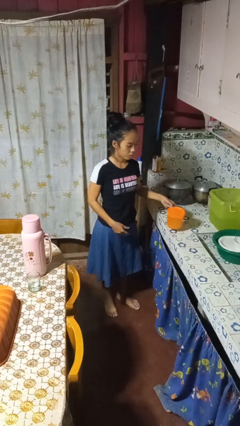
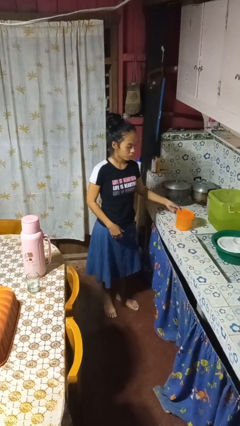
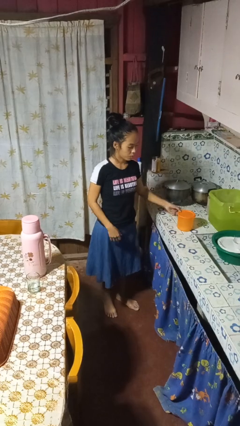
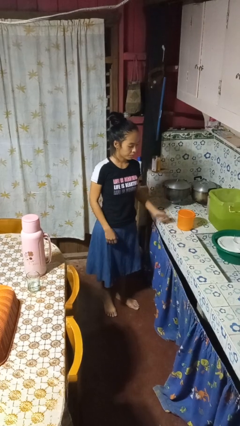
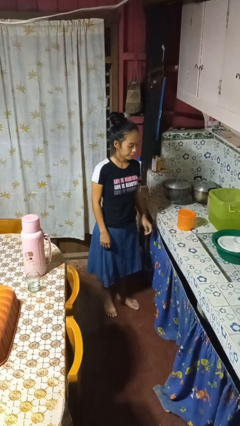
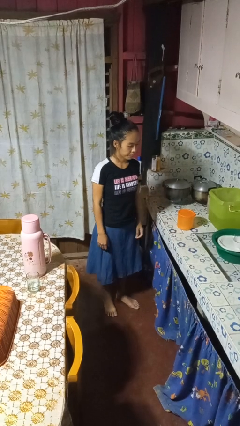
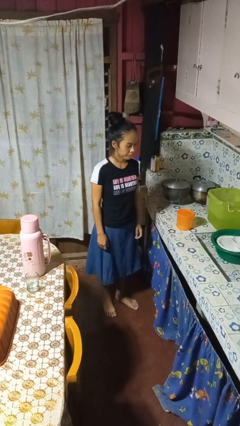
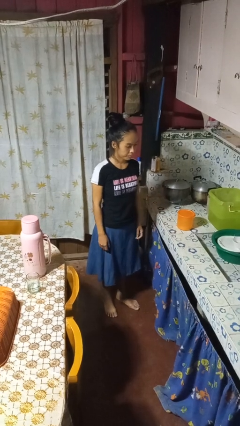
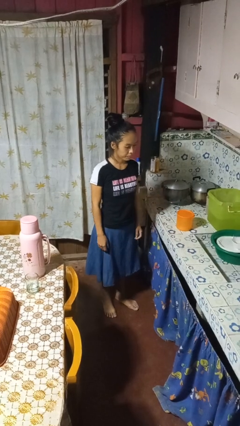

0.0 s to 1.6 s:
person puts down object on countertop

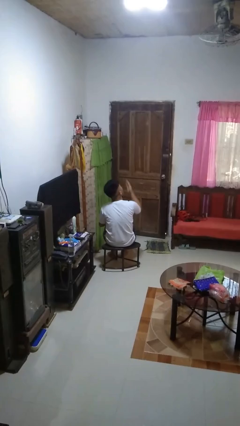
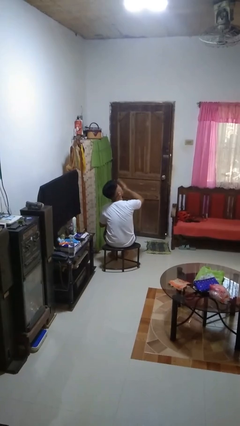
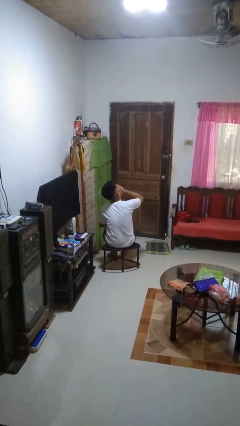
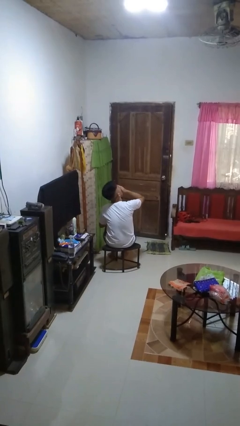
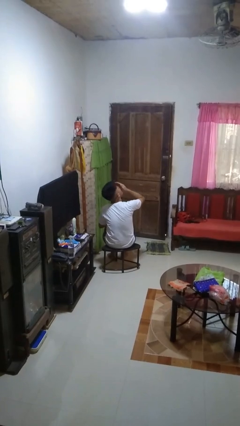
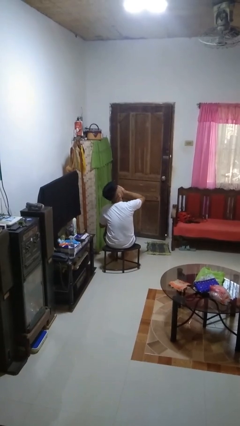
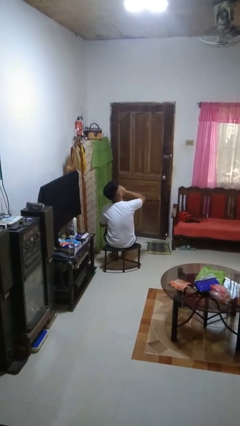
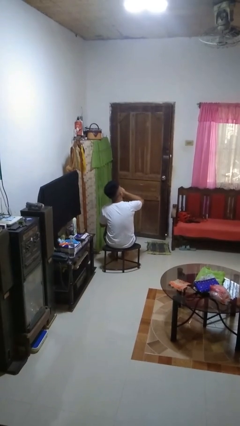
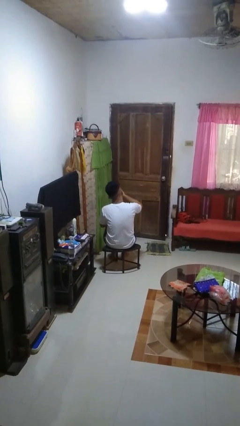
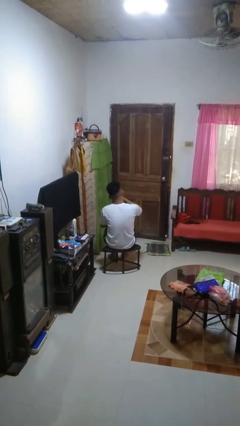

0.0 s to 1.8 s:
person yawns

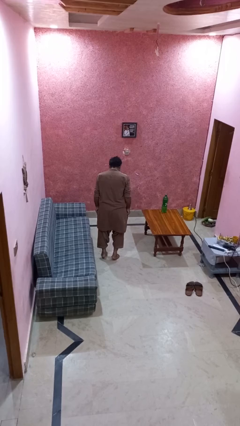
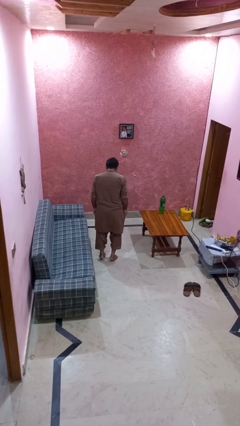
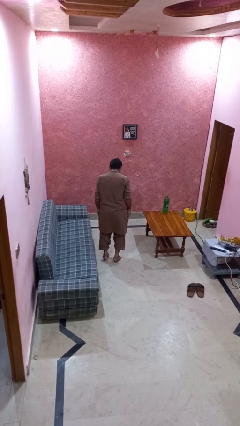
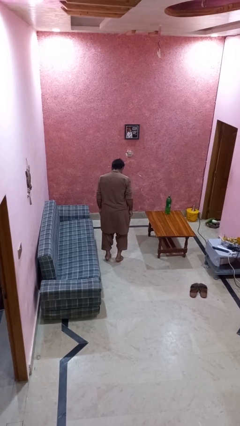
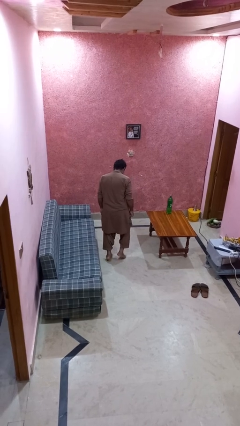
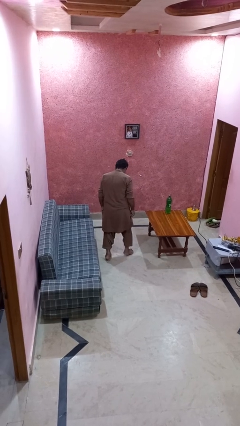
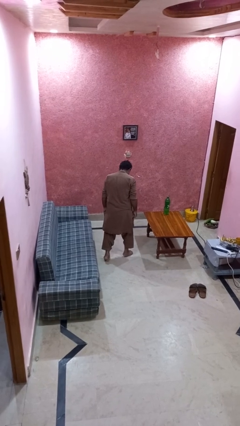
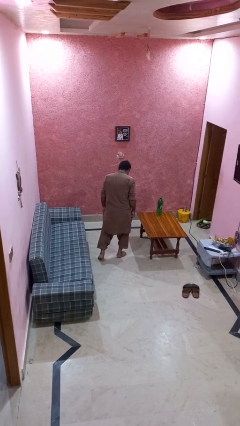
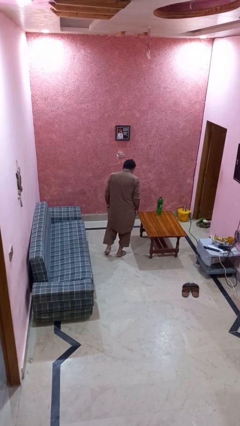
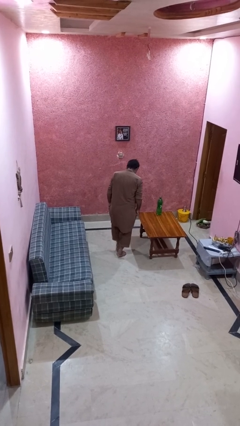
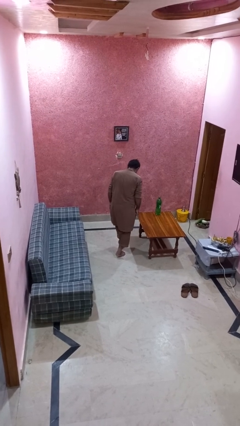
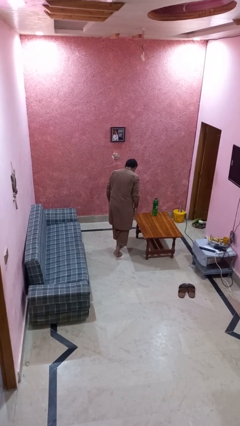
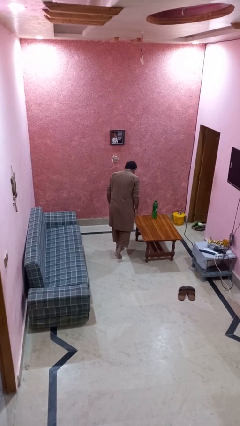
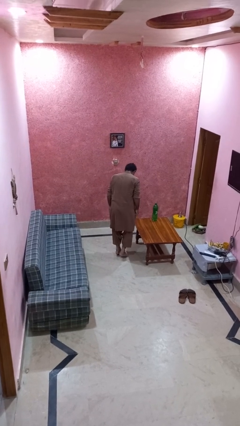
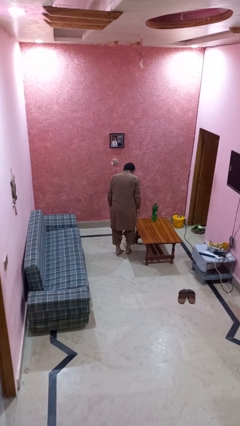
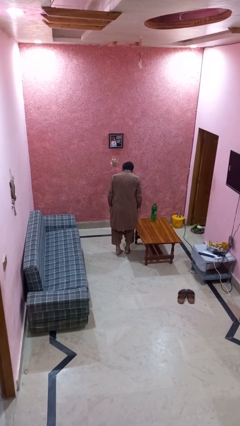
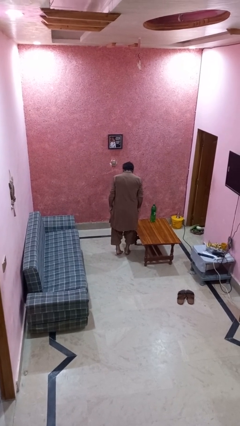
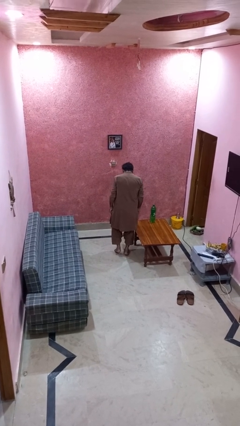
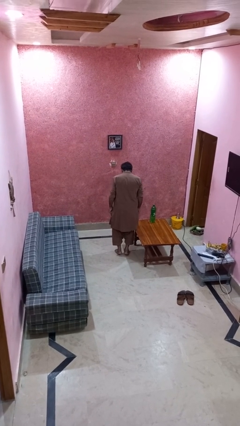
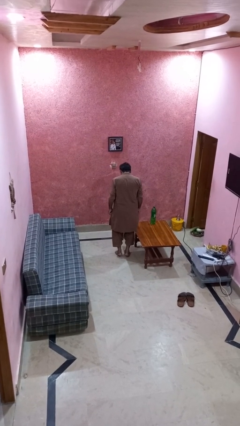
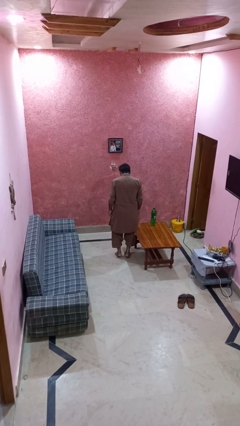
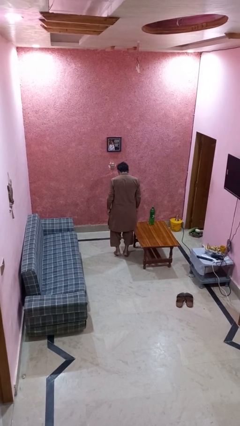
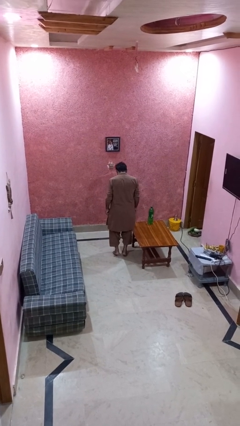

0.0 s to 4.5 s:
person walks tiptoe

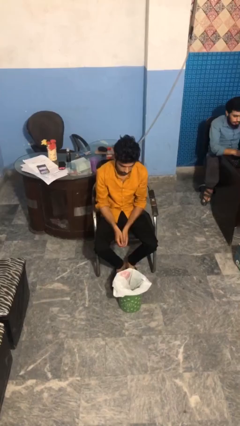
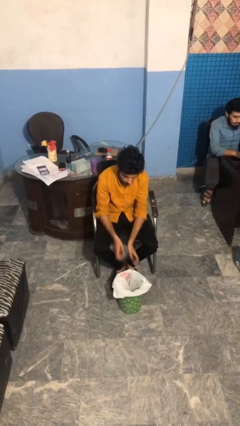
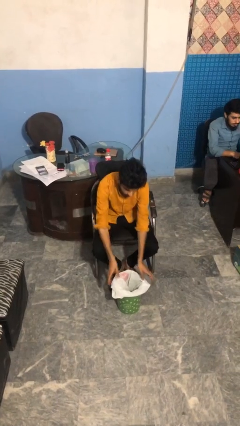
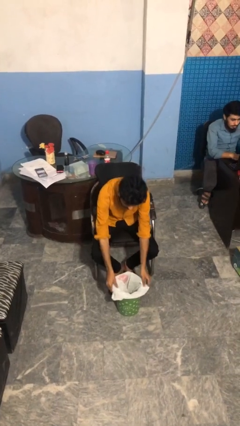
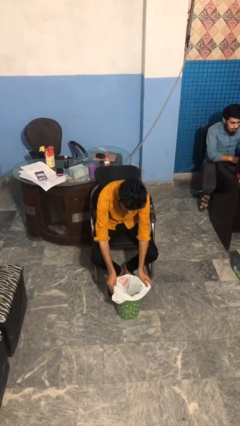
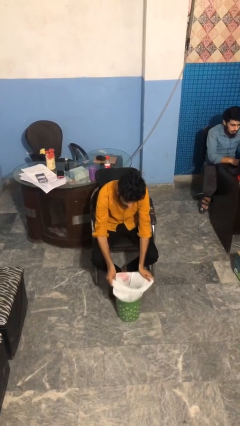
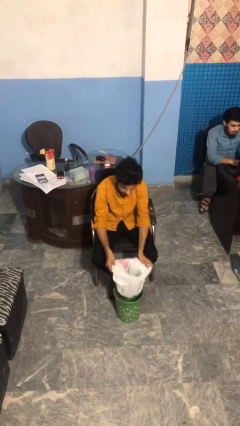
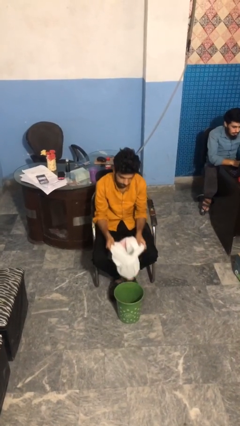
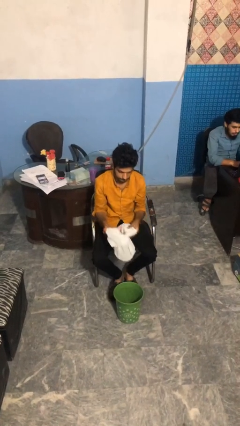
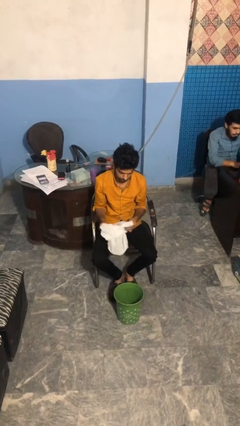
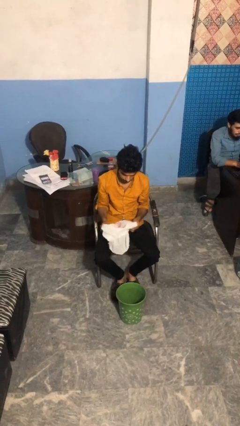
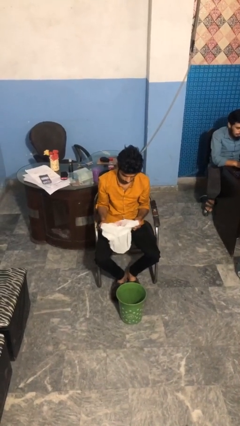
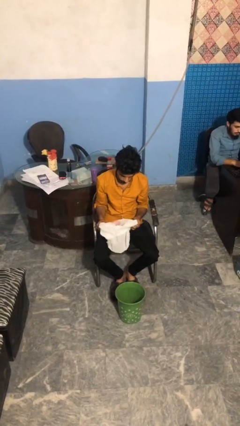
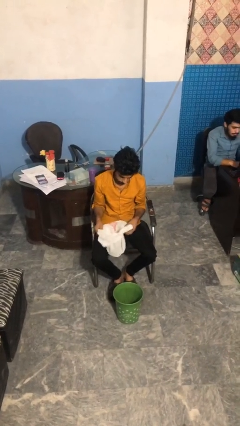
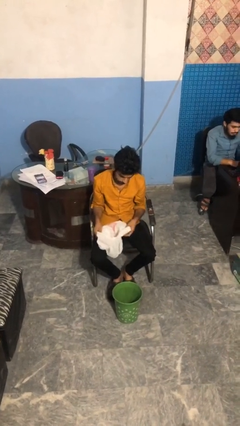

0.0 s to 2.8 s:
person removes trashbag from trashcan

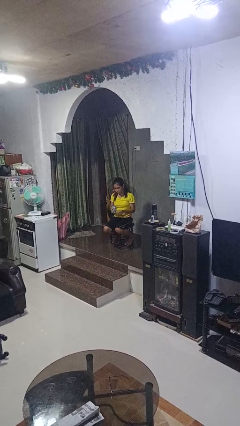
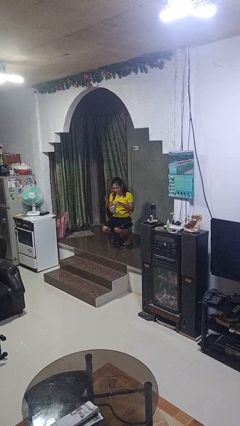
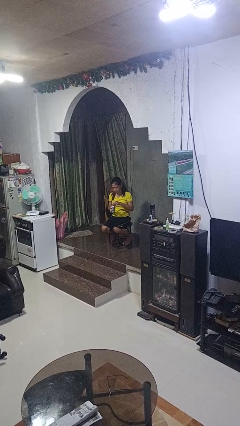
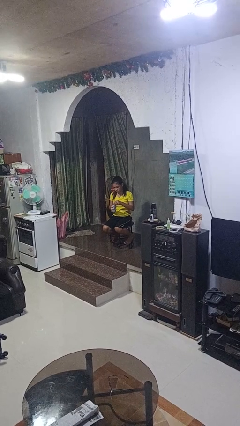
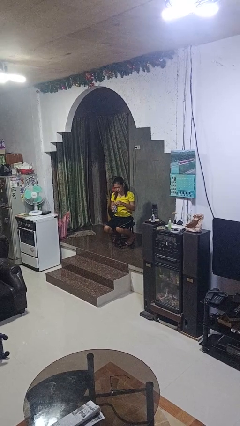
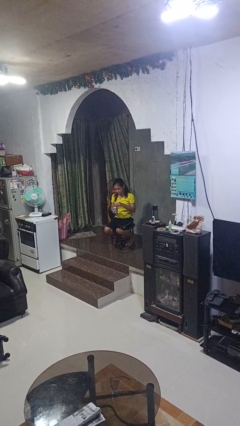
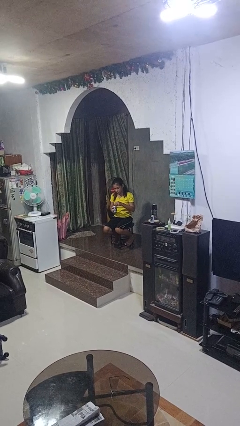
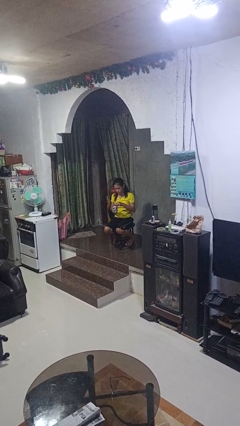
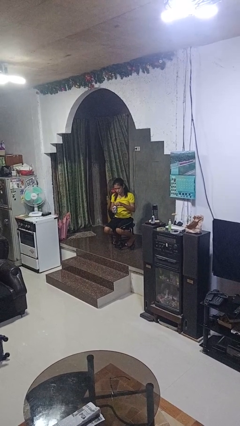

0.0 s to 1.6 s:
person opens beverage can

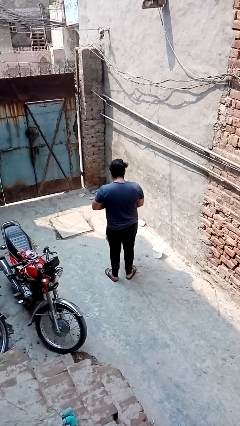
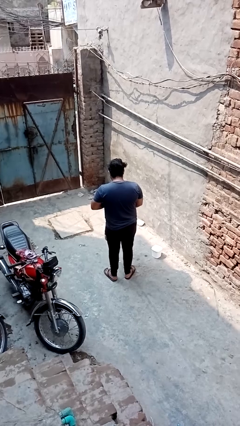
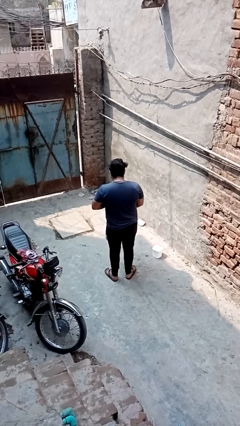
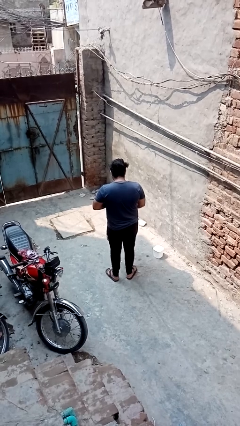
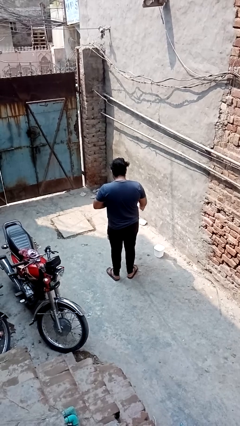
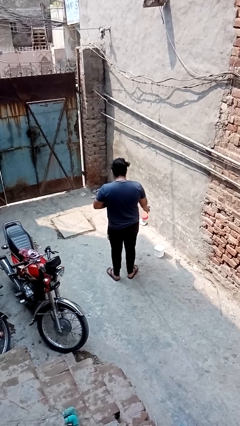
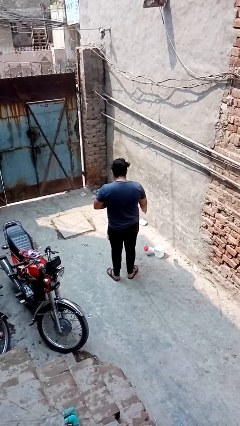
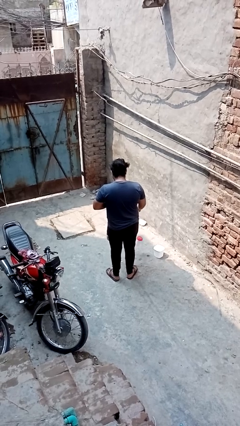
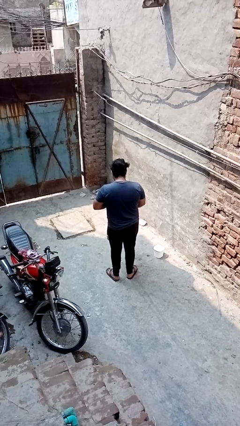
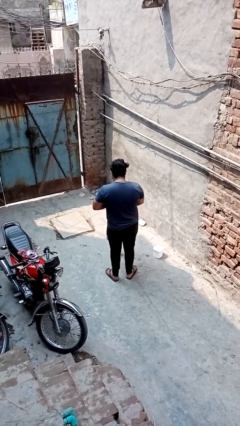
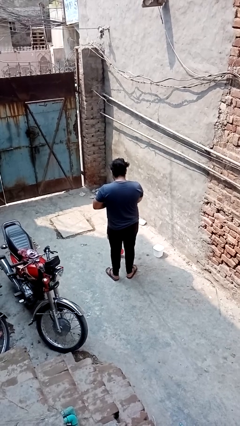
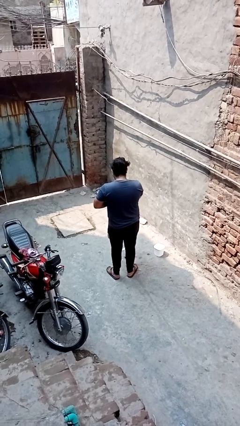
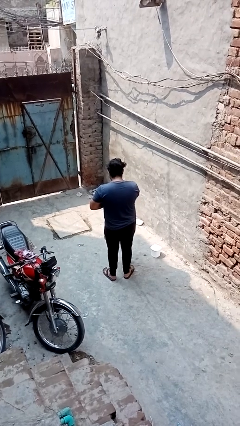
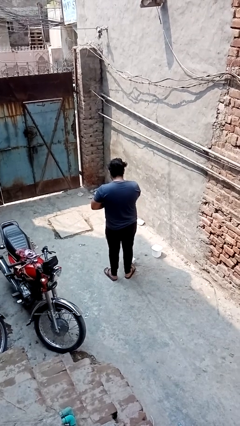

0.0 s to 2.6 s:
person cleans table with rag

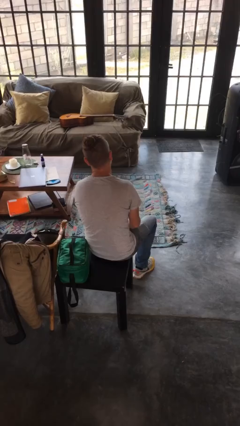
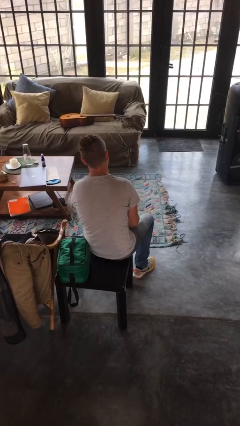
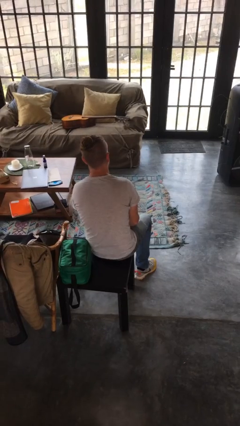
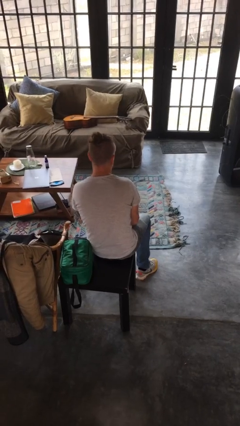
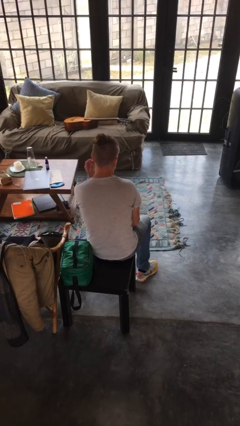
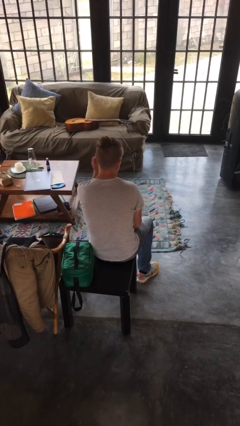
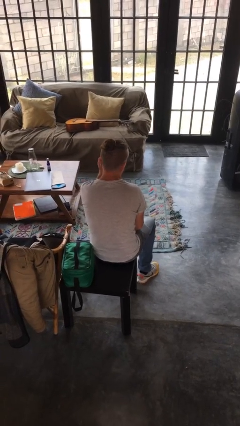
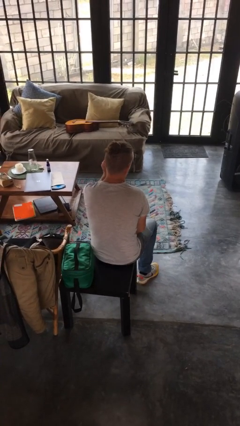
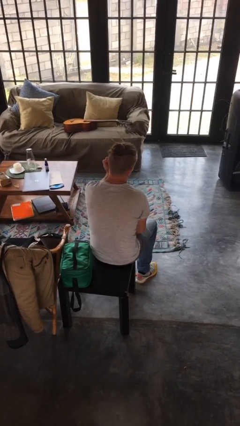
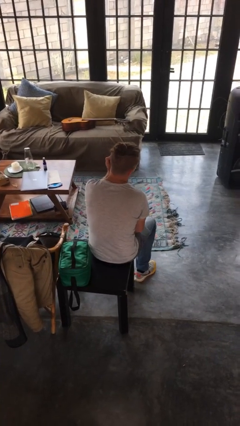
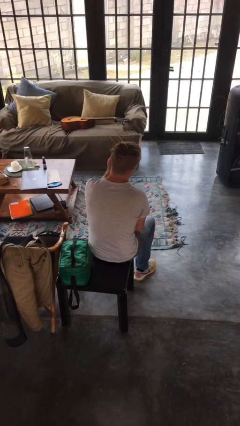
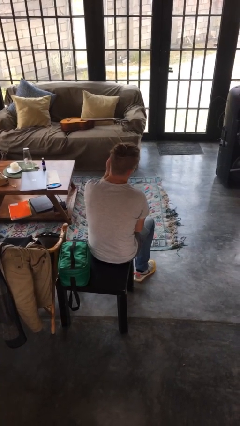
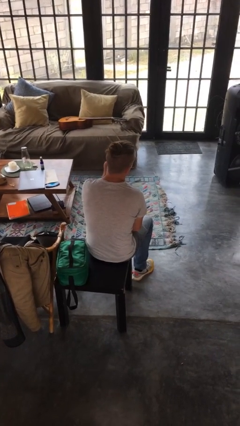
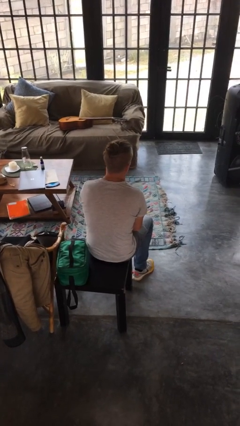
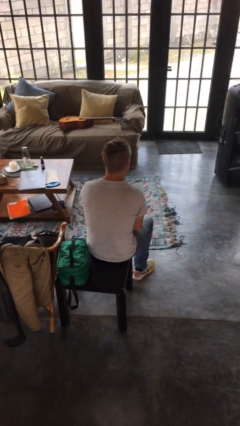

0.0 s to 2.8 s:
person touches earlobe
